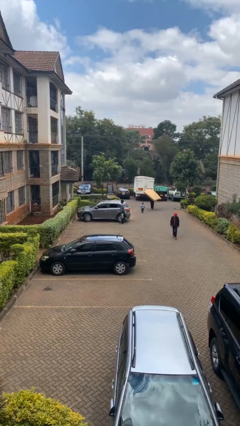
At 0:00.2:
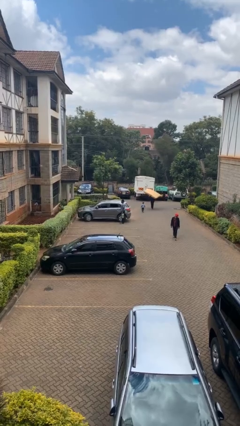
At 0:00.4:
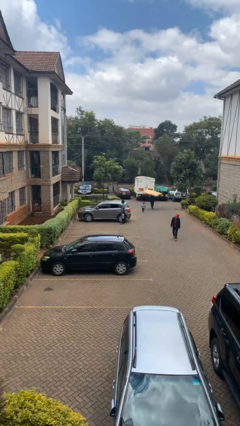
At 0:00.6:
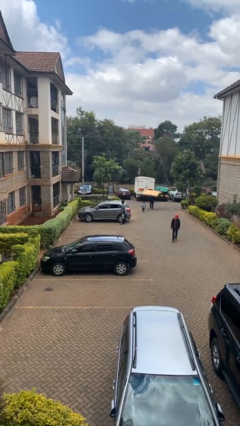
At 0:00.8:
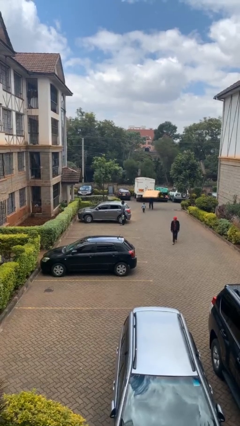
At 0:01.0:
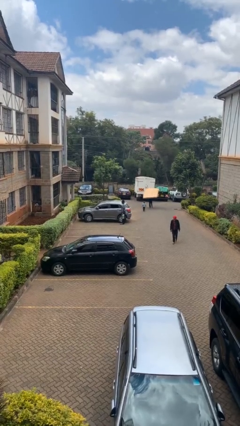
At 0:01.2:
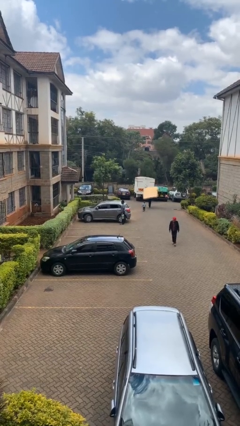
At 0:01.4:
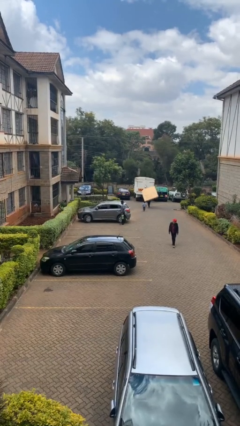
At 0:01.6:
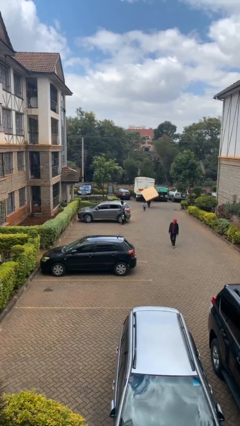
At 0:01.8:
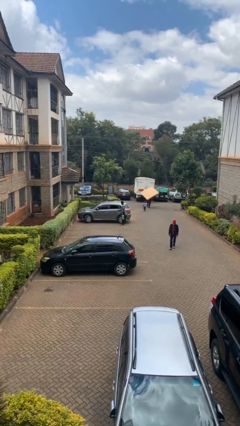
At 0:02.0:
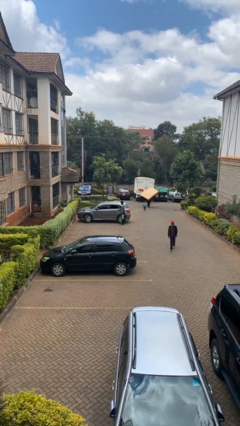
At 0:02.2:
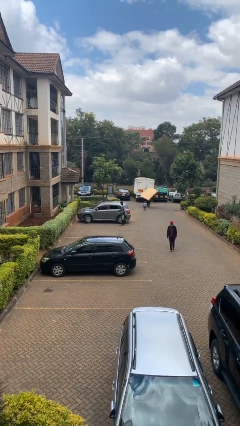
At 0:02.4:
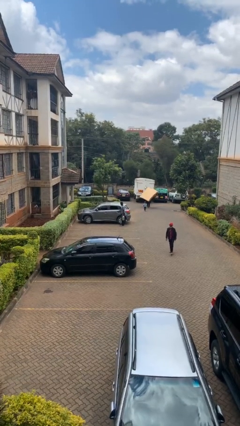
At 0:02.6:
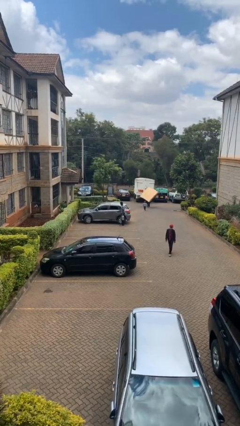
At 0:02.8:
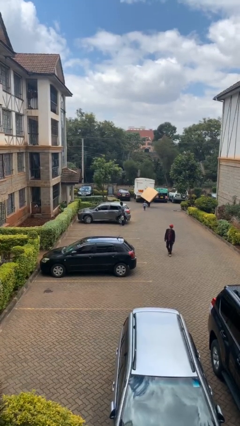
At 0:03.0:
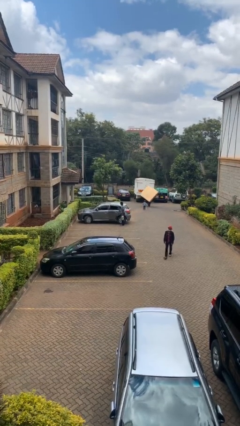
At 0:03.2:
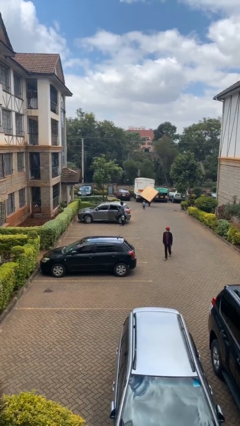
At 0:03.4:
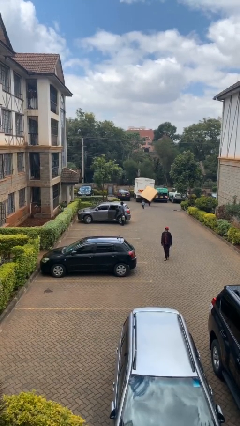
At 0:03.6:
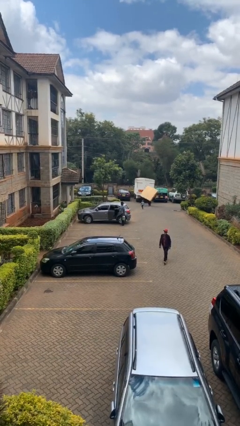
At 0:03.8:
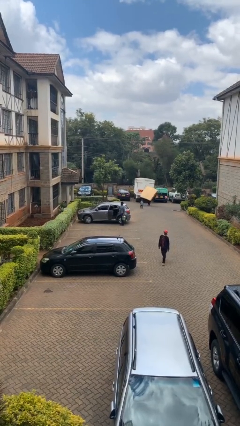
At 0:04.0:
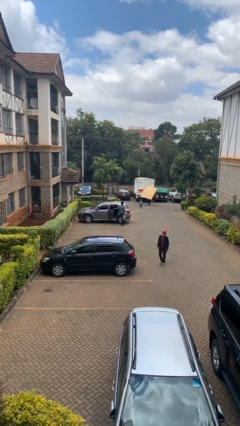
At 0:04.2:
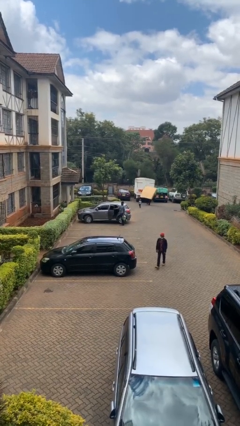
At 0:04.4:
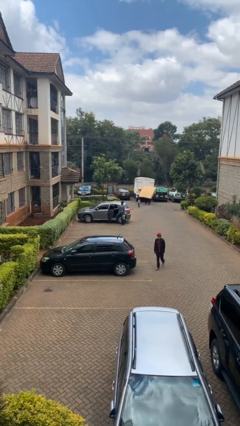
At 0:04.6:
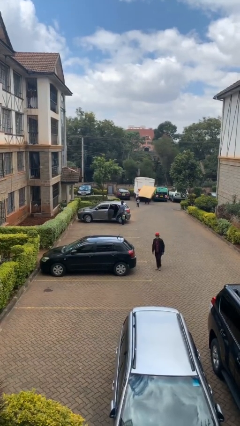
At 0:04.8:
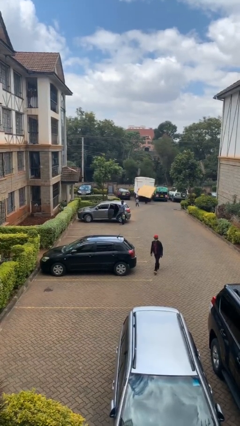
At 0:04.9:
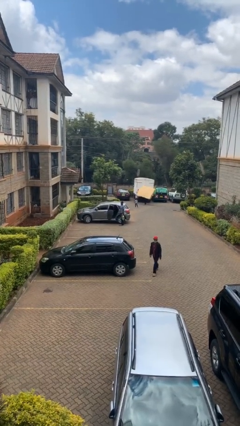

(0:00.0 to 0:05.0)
person opens car door

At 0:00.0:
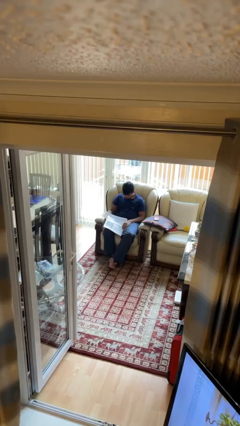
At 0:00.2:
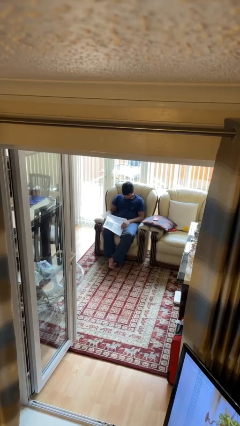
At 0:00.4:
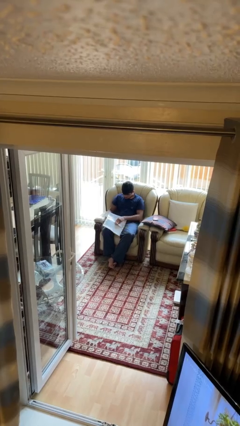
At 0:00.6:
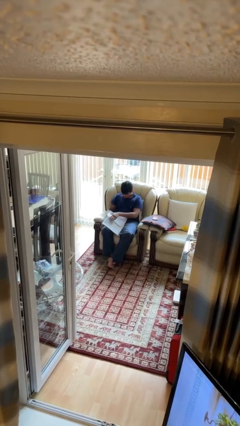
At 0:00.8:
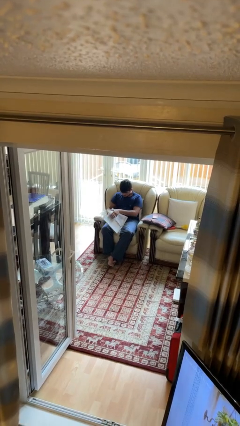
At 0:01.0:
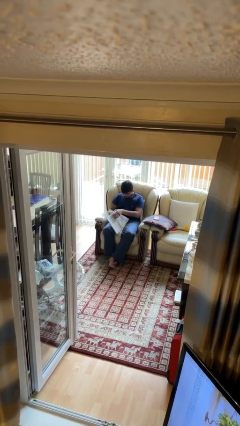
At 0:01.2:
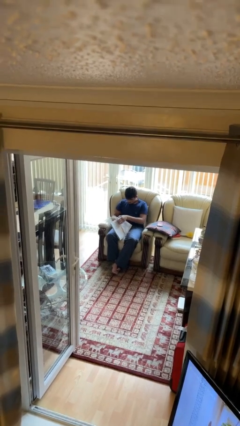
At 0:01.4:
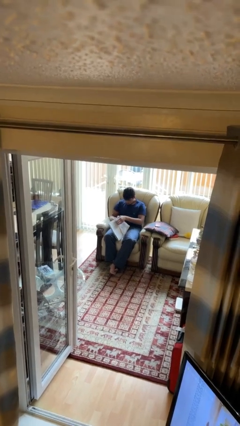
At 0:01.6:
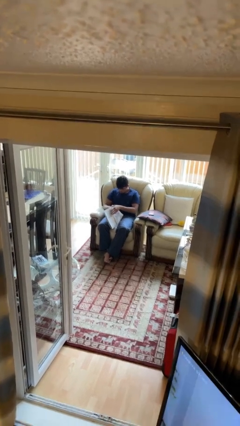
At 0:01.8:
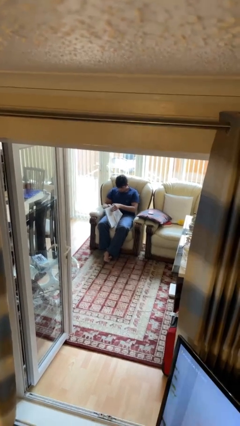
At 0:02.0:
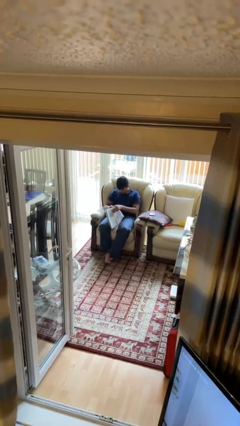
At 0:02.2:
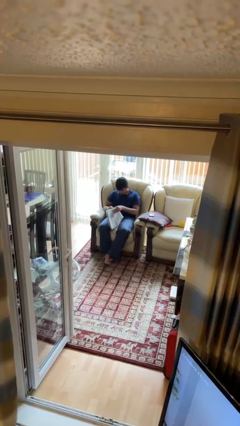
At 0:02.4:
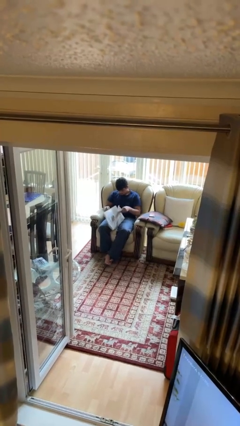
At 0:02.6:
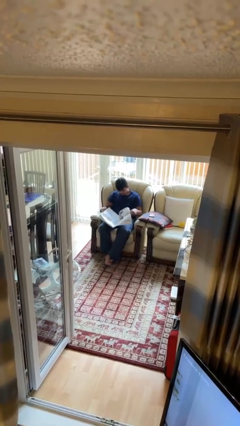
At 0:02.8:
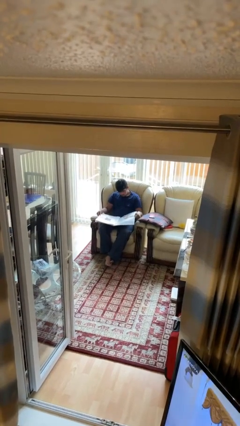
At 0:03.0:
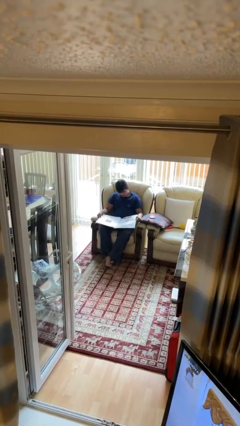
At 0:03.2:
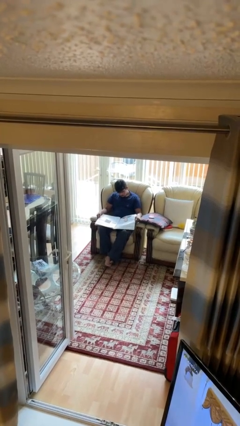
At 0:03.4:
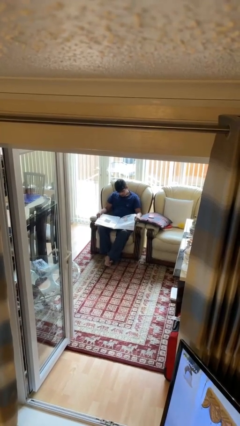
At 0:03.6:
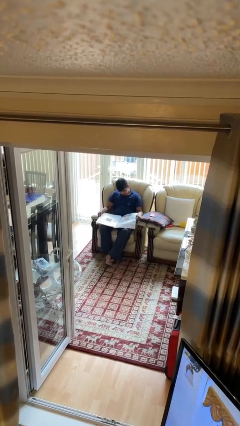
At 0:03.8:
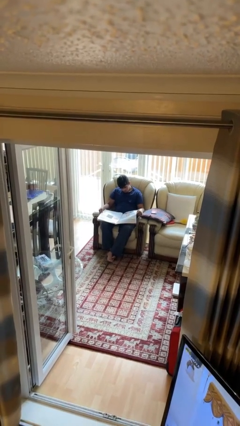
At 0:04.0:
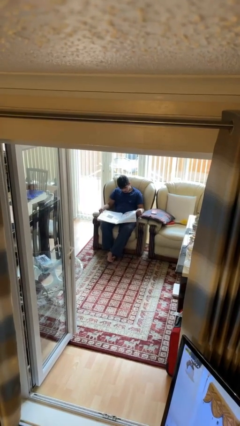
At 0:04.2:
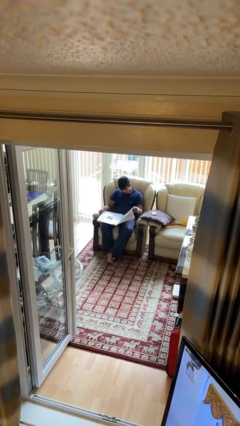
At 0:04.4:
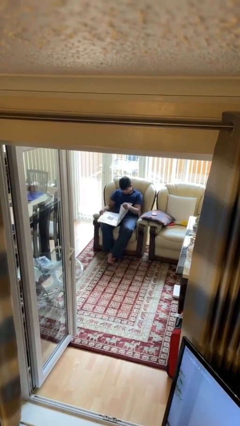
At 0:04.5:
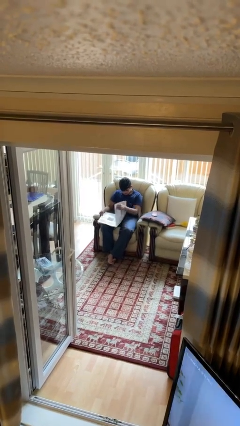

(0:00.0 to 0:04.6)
person reads newspaper

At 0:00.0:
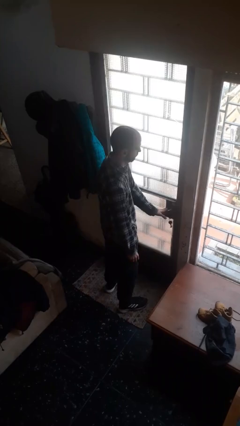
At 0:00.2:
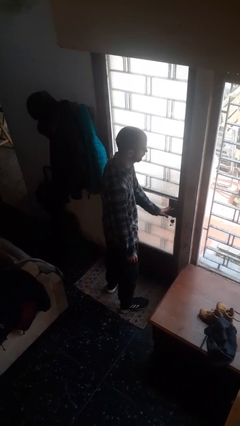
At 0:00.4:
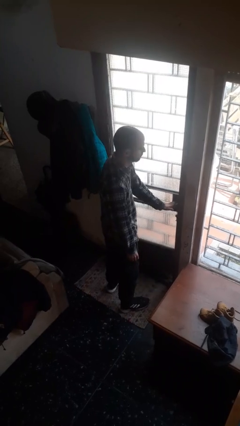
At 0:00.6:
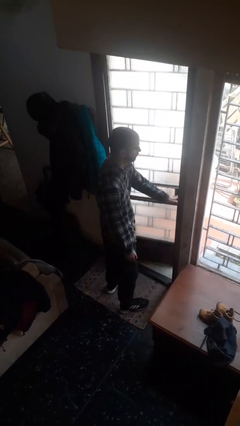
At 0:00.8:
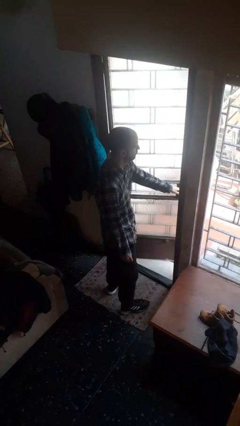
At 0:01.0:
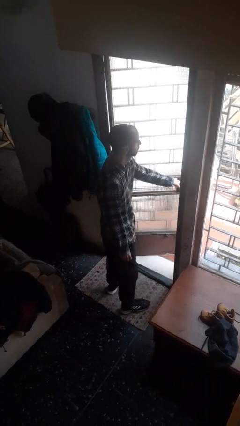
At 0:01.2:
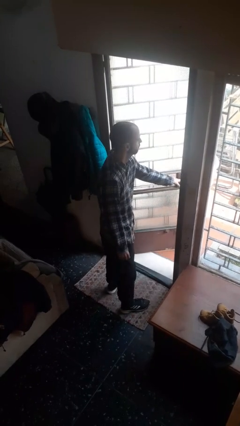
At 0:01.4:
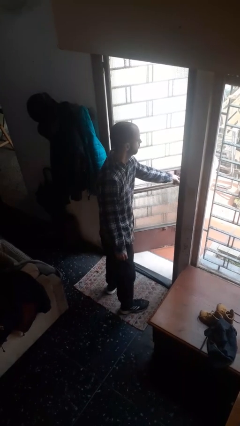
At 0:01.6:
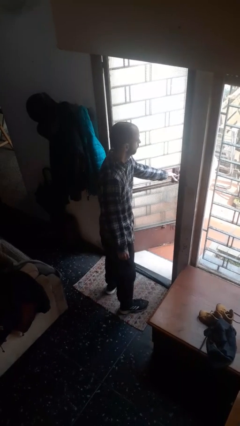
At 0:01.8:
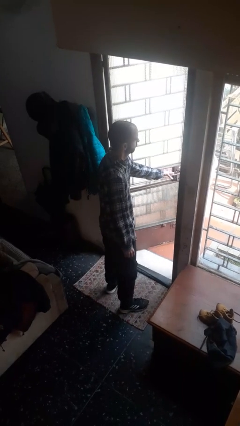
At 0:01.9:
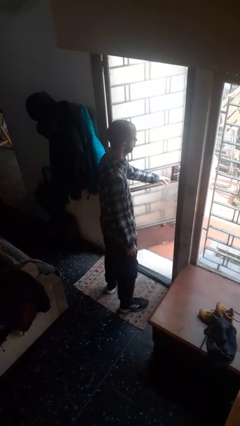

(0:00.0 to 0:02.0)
person opens facility door

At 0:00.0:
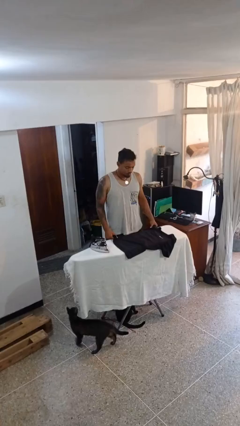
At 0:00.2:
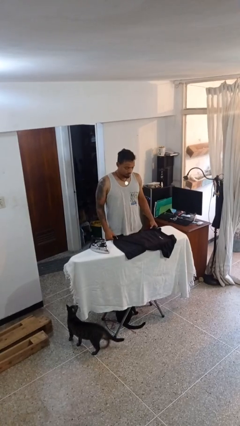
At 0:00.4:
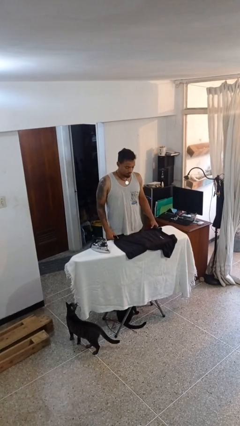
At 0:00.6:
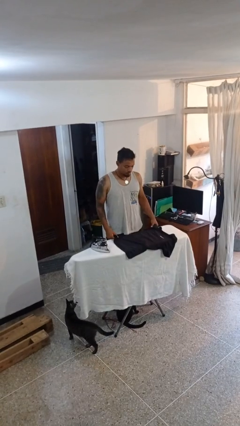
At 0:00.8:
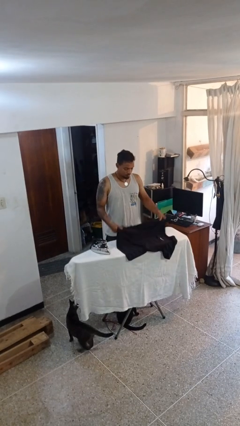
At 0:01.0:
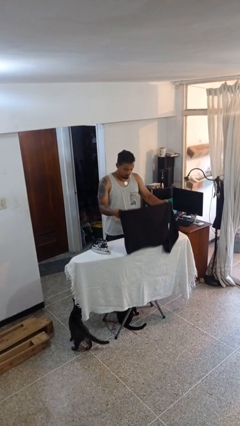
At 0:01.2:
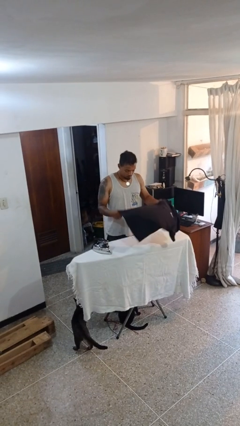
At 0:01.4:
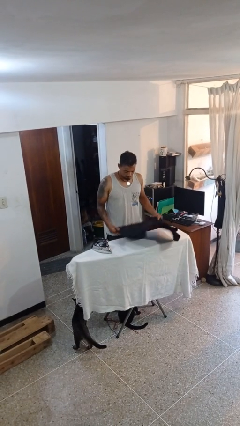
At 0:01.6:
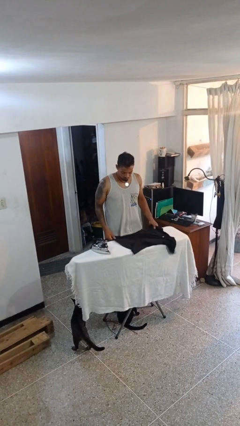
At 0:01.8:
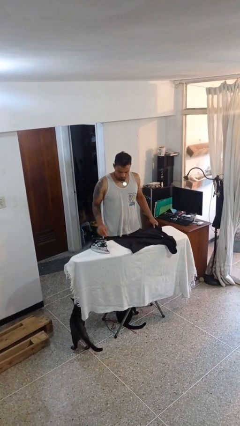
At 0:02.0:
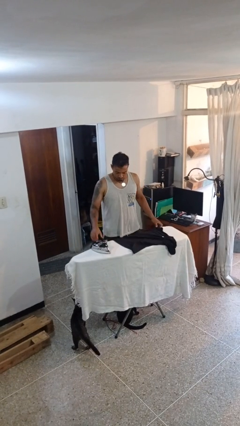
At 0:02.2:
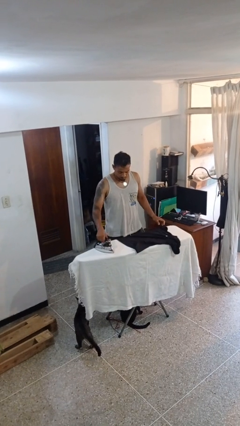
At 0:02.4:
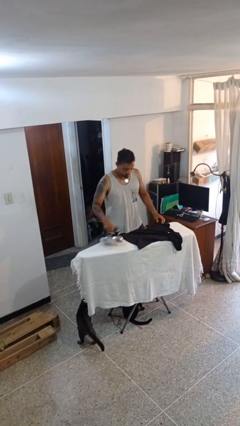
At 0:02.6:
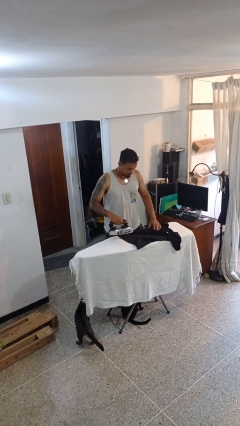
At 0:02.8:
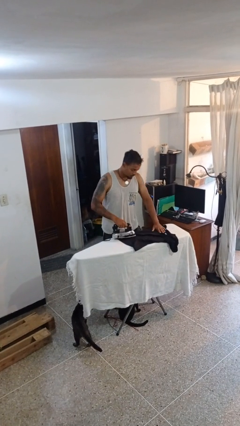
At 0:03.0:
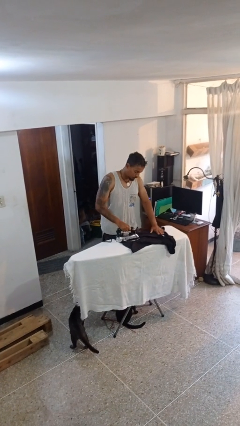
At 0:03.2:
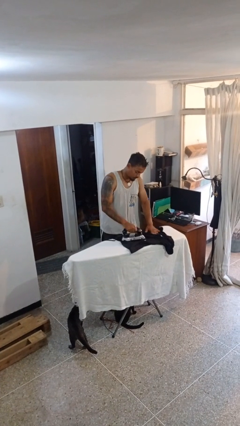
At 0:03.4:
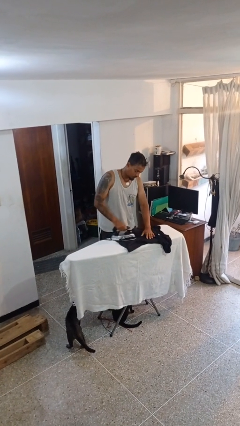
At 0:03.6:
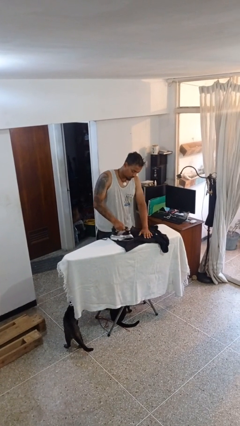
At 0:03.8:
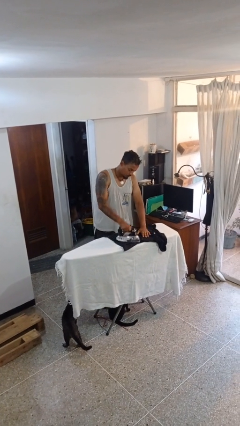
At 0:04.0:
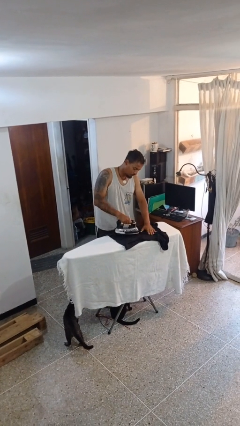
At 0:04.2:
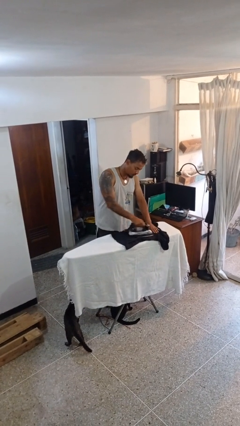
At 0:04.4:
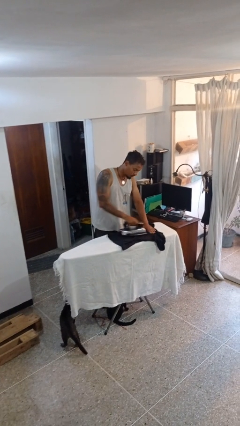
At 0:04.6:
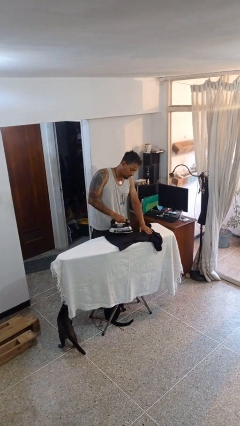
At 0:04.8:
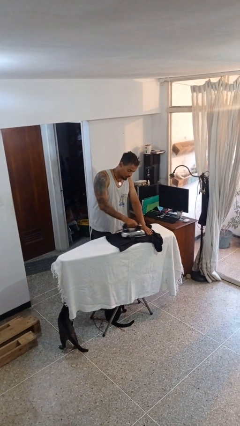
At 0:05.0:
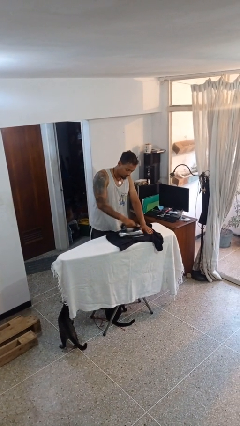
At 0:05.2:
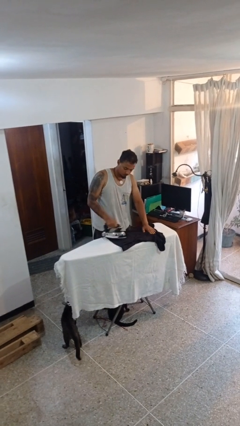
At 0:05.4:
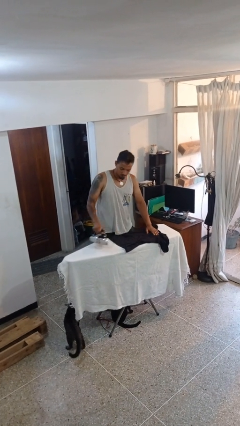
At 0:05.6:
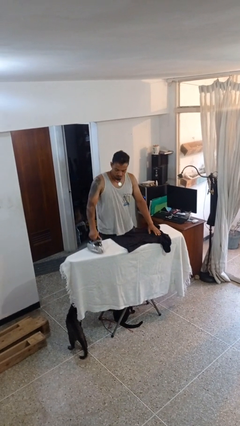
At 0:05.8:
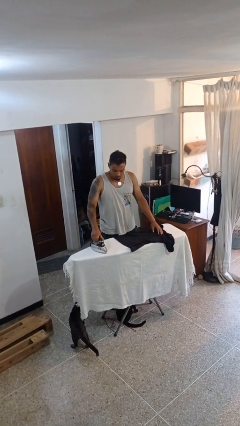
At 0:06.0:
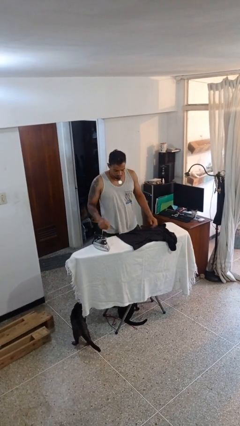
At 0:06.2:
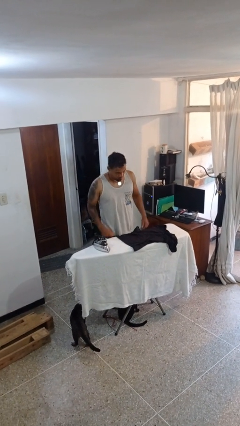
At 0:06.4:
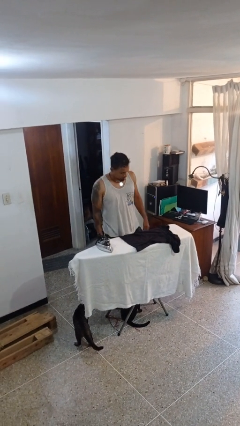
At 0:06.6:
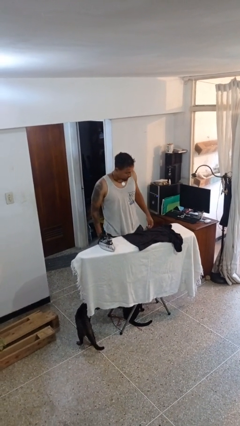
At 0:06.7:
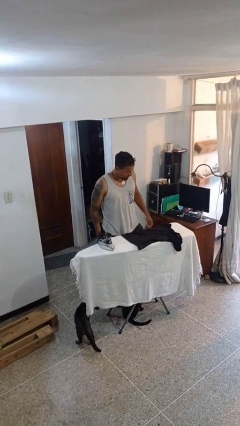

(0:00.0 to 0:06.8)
person irons clothes
